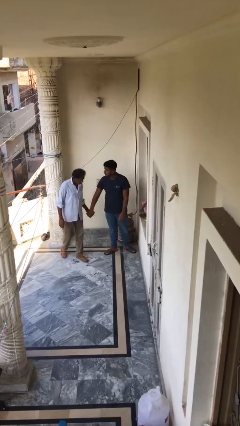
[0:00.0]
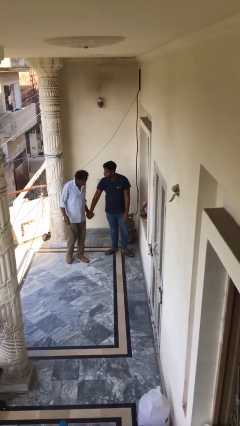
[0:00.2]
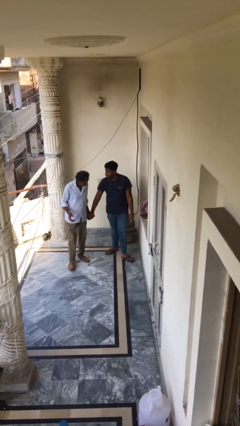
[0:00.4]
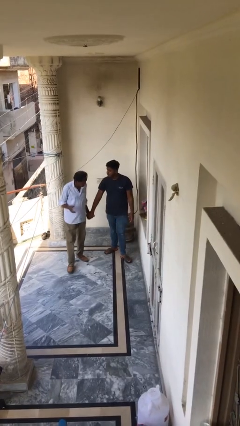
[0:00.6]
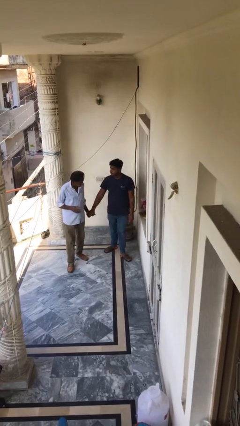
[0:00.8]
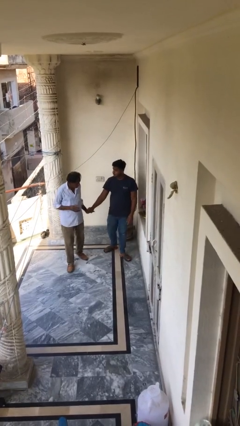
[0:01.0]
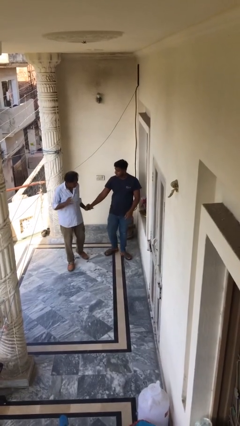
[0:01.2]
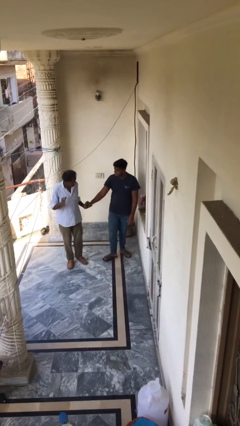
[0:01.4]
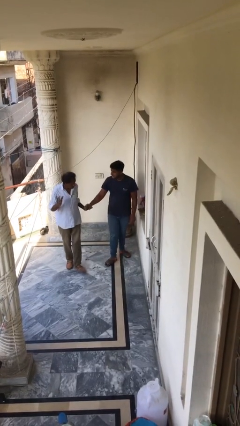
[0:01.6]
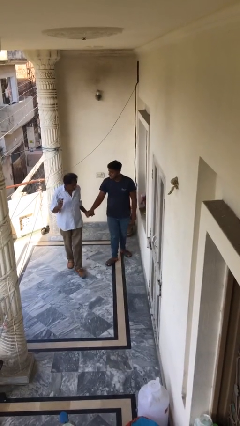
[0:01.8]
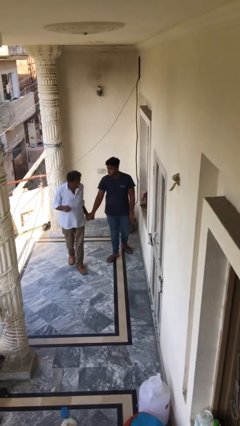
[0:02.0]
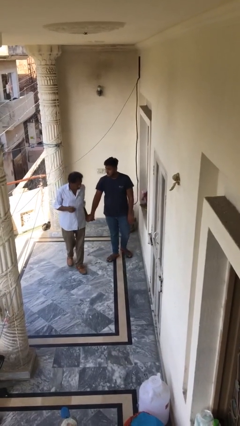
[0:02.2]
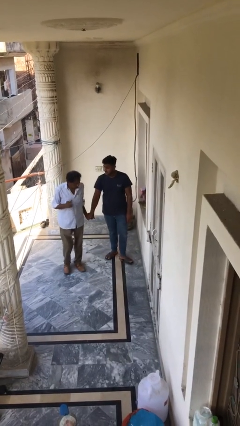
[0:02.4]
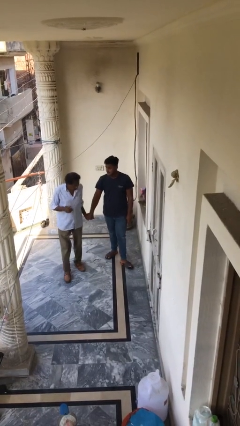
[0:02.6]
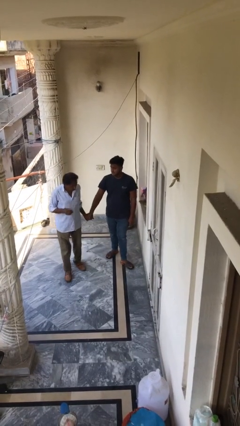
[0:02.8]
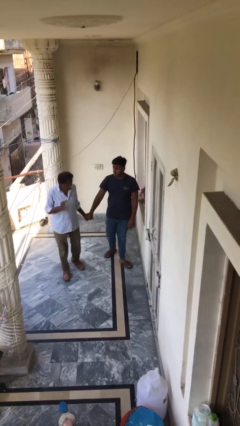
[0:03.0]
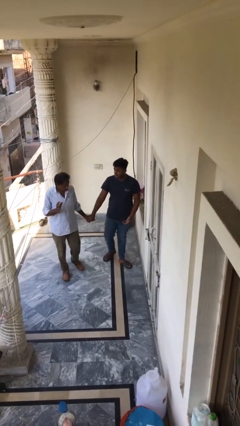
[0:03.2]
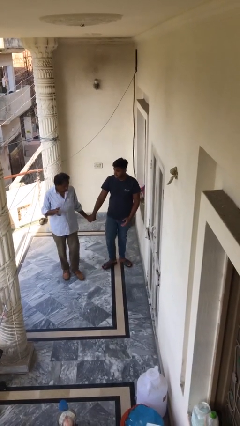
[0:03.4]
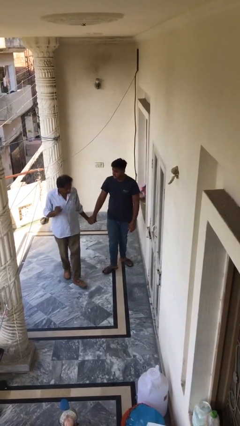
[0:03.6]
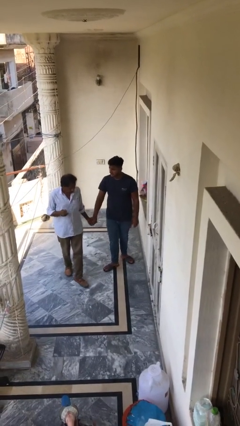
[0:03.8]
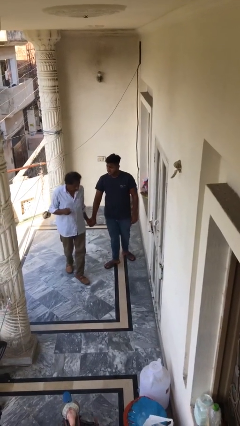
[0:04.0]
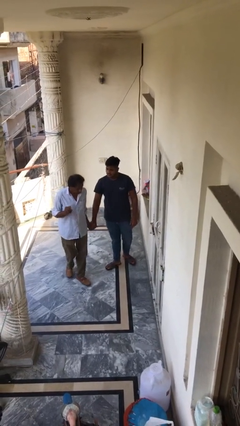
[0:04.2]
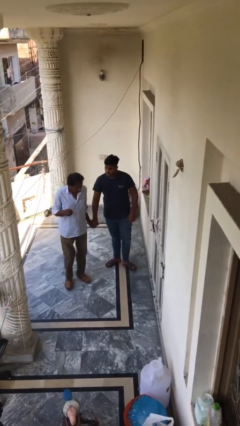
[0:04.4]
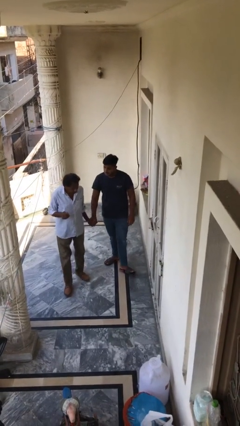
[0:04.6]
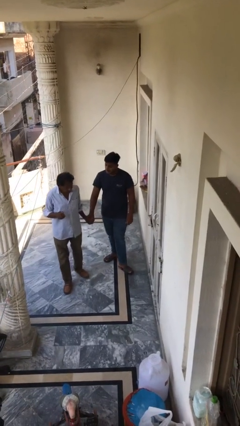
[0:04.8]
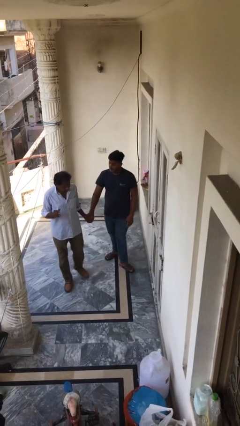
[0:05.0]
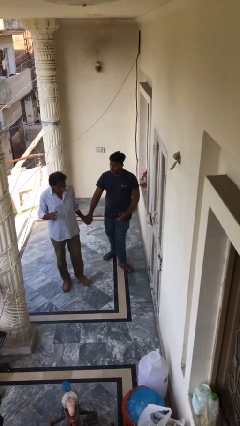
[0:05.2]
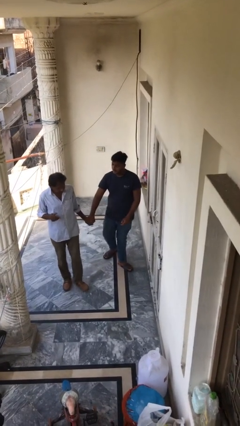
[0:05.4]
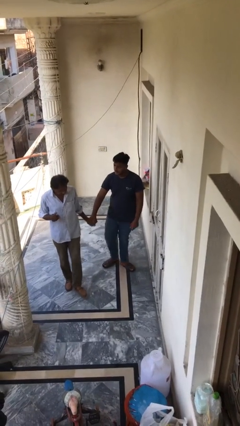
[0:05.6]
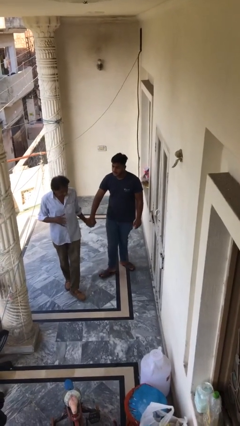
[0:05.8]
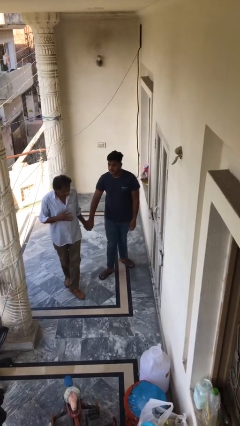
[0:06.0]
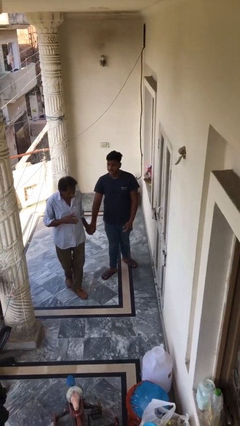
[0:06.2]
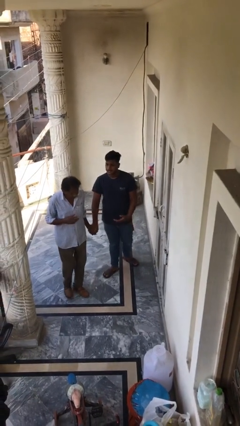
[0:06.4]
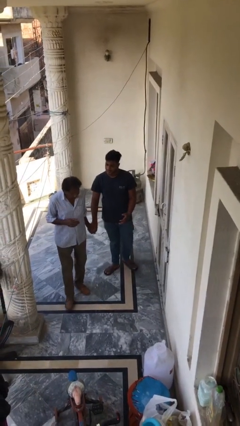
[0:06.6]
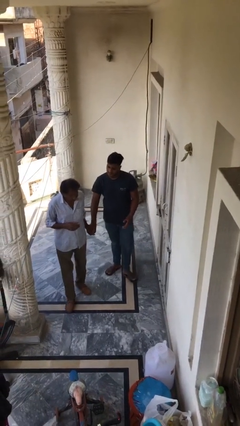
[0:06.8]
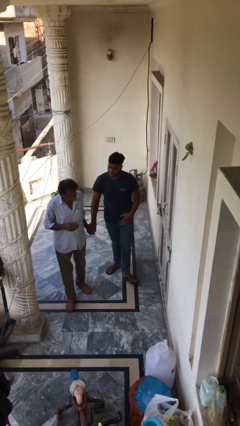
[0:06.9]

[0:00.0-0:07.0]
person holds hand

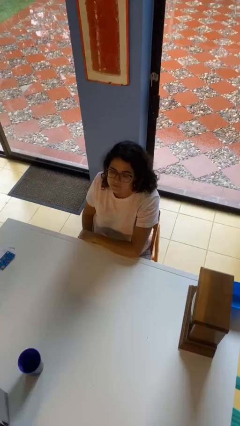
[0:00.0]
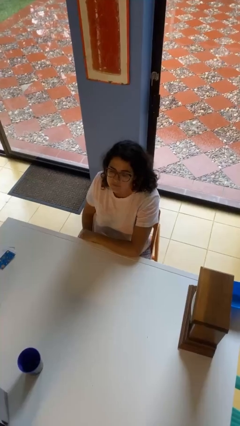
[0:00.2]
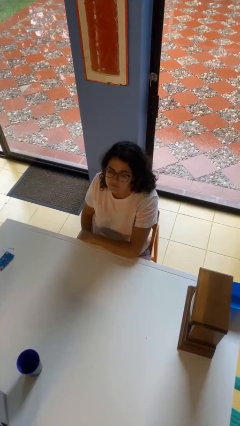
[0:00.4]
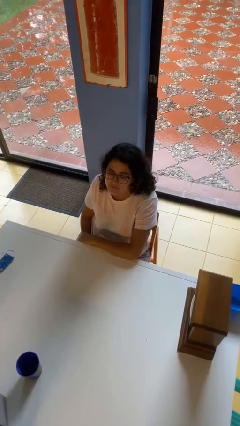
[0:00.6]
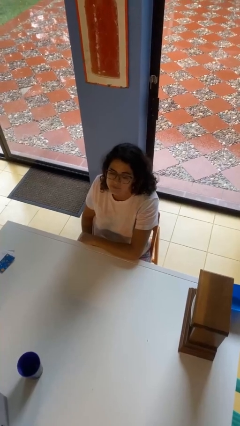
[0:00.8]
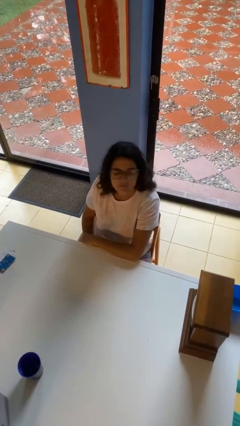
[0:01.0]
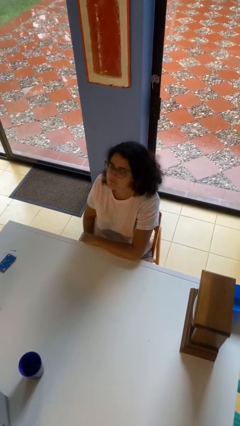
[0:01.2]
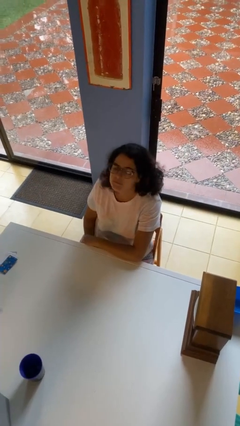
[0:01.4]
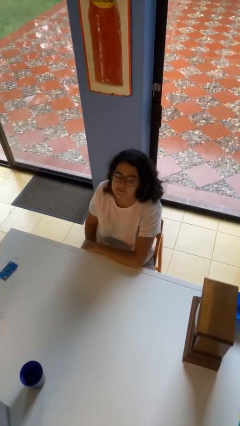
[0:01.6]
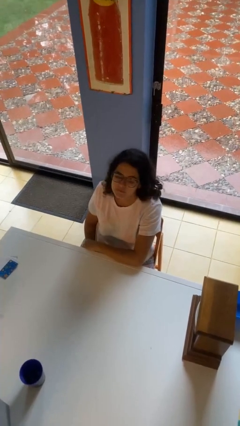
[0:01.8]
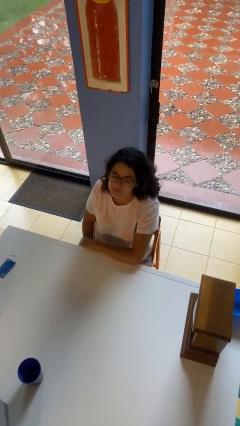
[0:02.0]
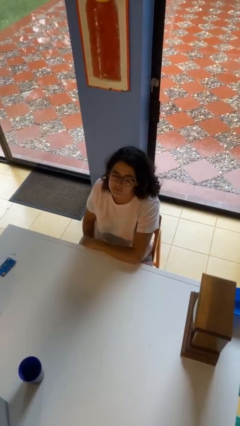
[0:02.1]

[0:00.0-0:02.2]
person shakes head

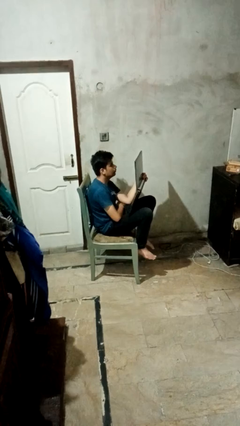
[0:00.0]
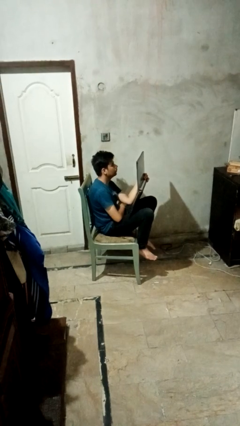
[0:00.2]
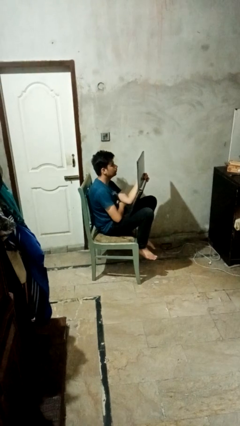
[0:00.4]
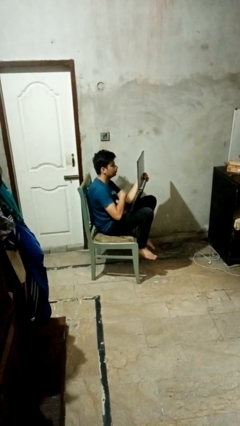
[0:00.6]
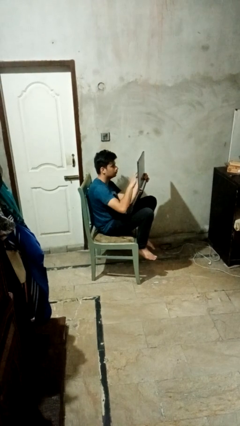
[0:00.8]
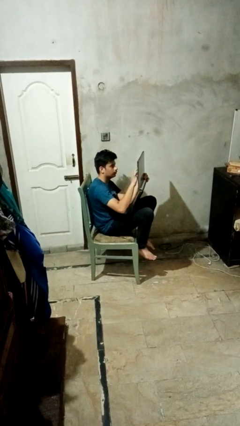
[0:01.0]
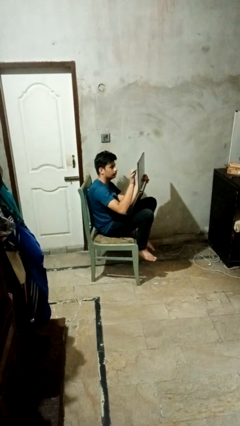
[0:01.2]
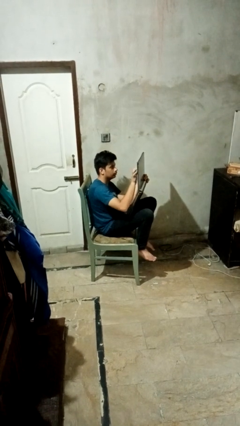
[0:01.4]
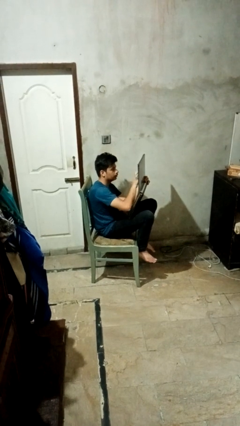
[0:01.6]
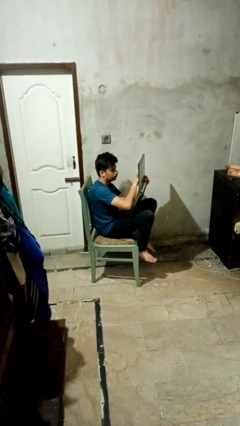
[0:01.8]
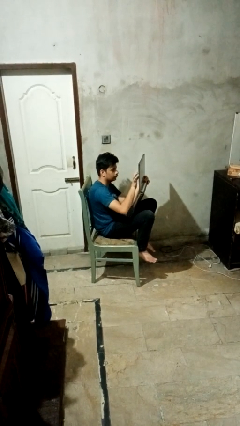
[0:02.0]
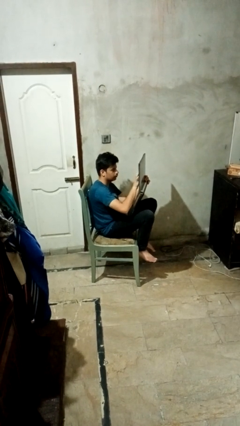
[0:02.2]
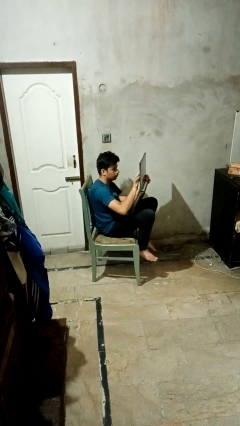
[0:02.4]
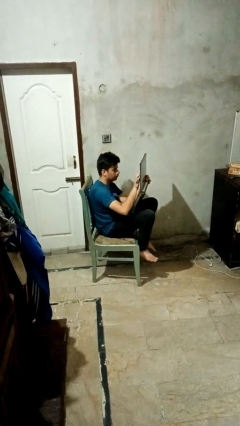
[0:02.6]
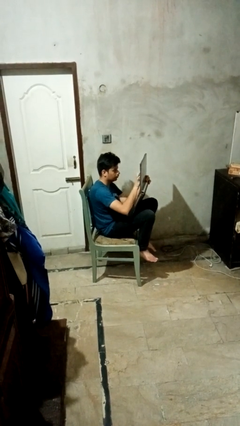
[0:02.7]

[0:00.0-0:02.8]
person interacts with tablet

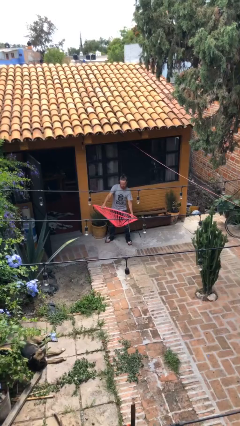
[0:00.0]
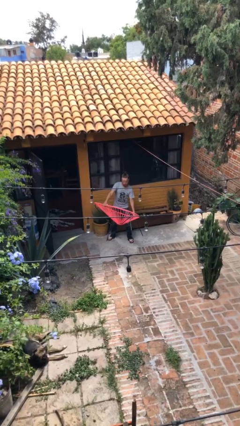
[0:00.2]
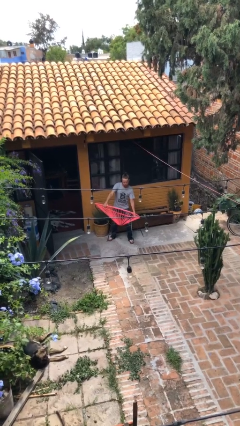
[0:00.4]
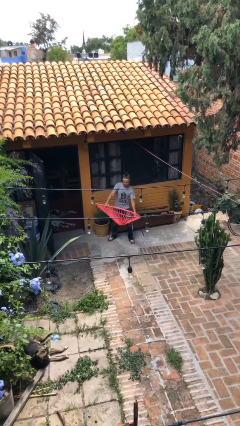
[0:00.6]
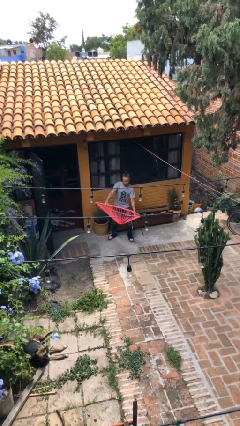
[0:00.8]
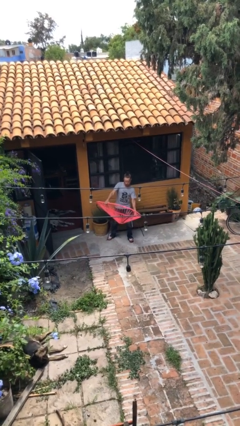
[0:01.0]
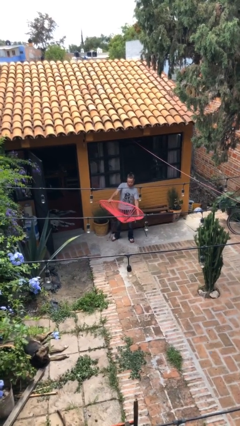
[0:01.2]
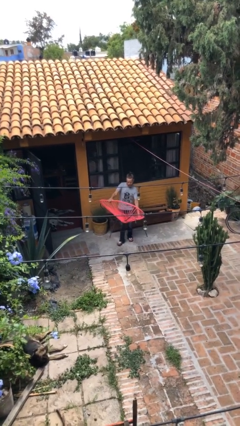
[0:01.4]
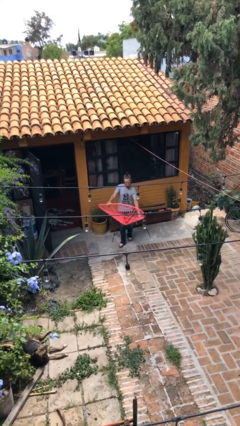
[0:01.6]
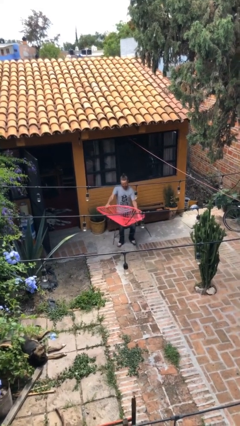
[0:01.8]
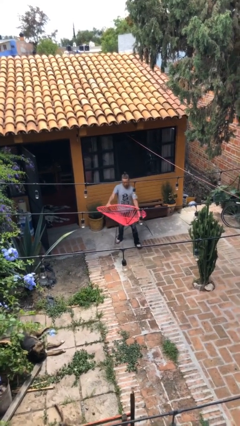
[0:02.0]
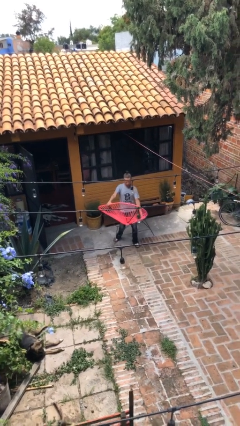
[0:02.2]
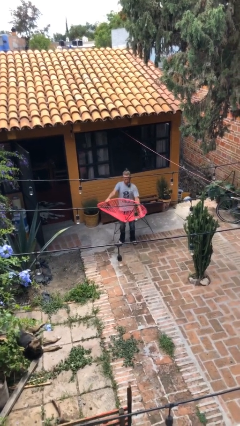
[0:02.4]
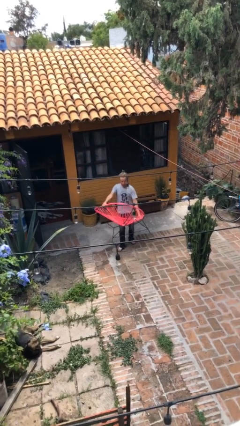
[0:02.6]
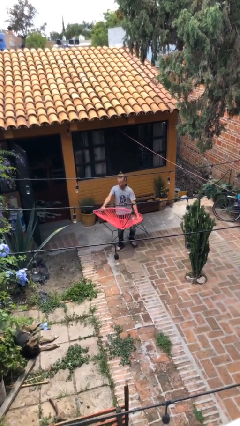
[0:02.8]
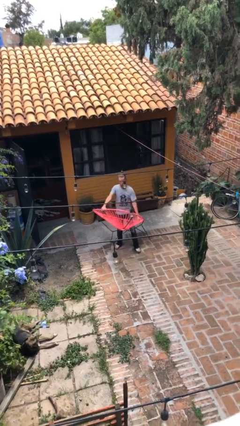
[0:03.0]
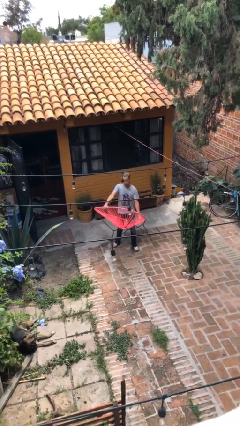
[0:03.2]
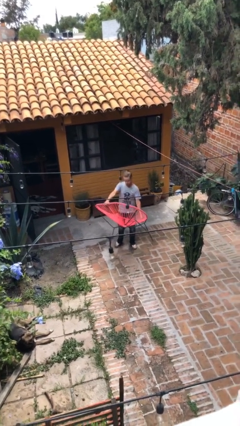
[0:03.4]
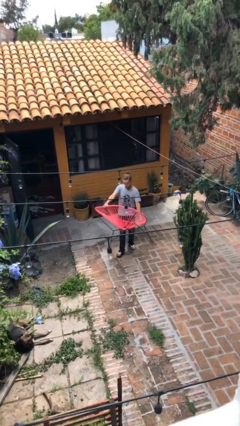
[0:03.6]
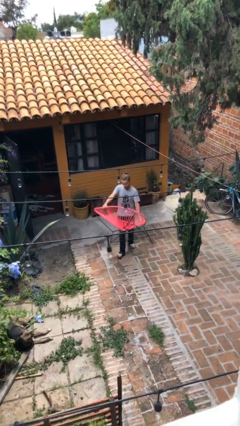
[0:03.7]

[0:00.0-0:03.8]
person carries heavy object

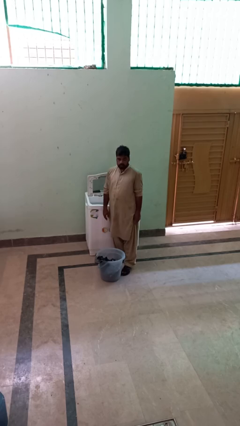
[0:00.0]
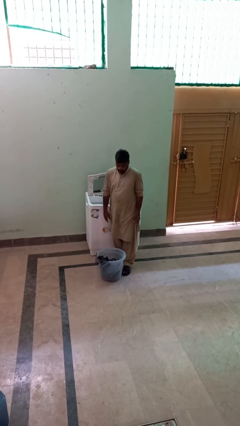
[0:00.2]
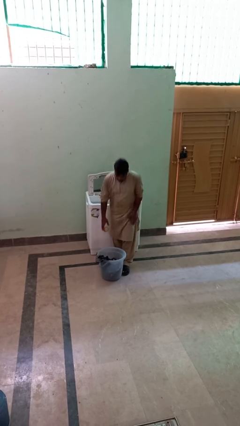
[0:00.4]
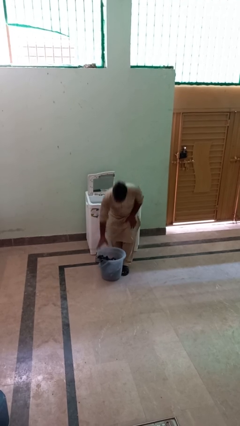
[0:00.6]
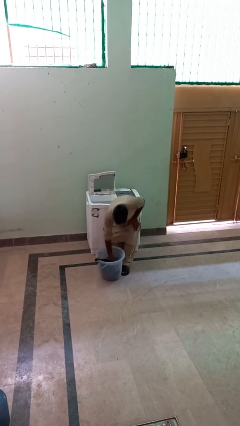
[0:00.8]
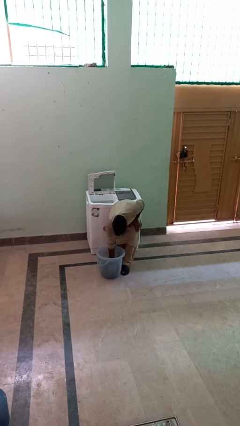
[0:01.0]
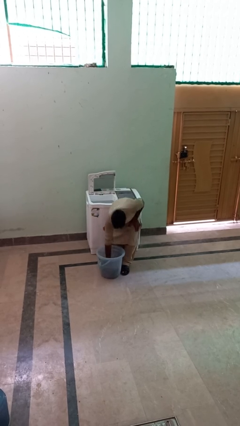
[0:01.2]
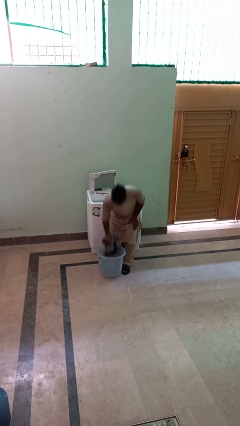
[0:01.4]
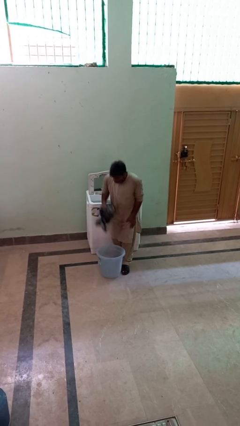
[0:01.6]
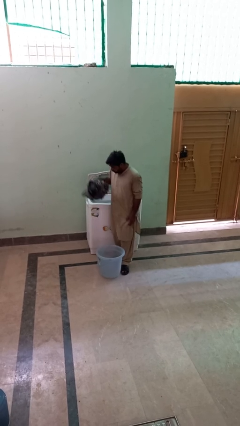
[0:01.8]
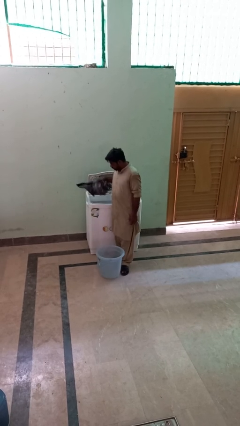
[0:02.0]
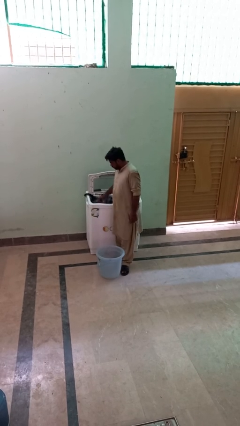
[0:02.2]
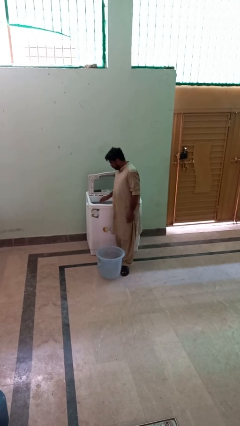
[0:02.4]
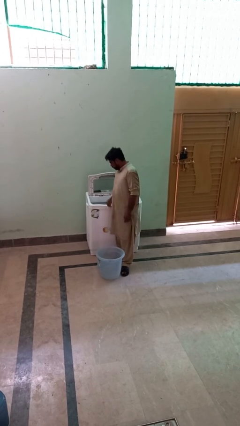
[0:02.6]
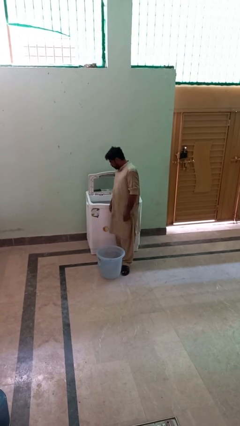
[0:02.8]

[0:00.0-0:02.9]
person loads clotheswasher
